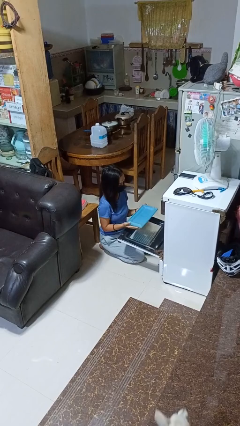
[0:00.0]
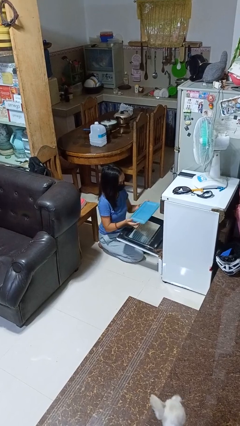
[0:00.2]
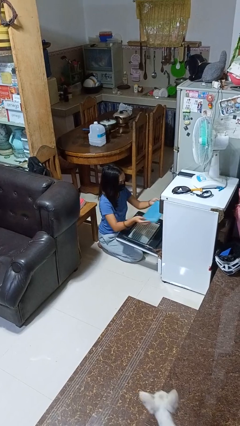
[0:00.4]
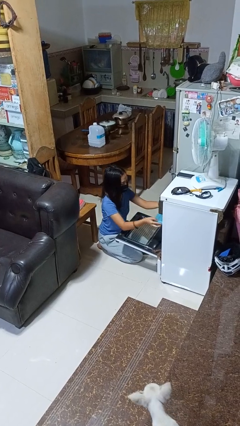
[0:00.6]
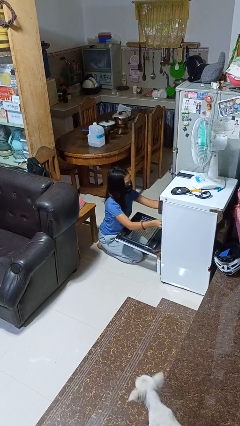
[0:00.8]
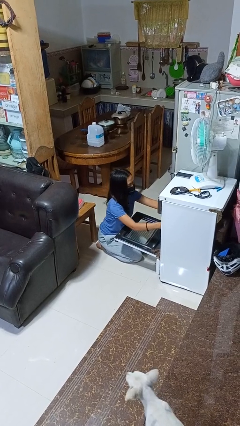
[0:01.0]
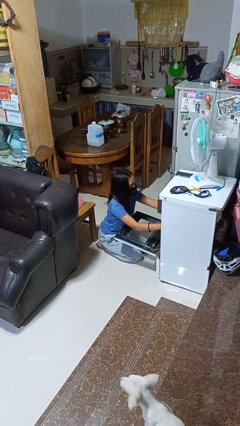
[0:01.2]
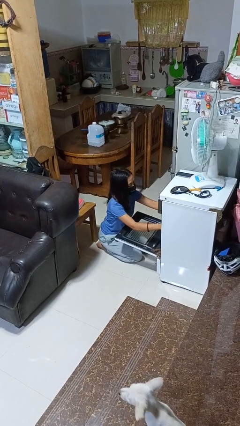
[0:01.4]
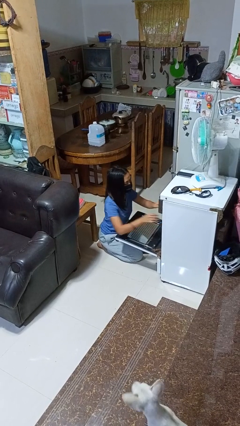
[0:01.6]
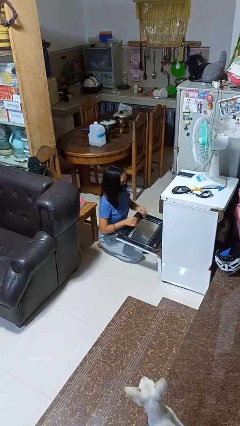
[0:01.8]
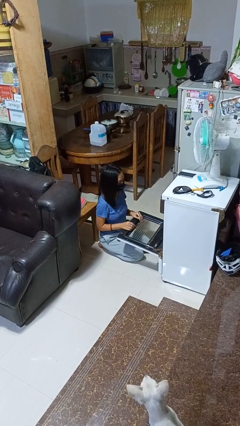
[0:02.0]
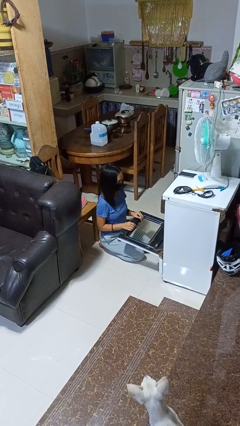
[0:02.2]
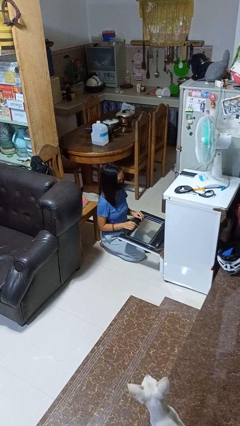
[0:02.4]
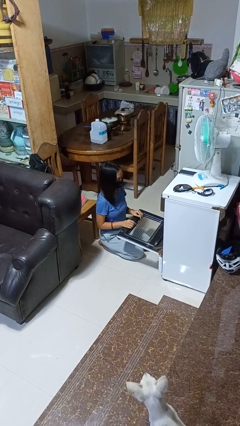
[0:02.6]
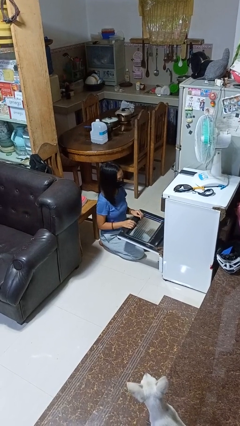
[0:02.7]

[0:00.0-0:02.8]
person puts object into oven

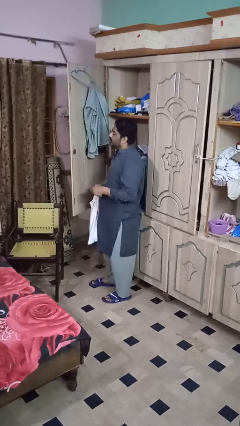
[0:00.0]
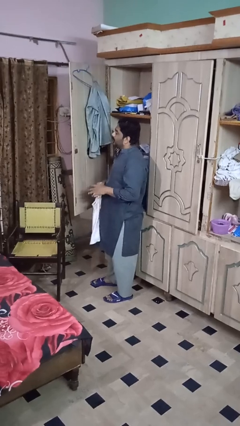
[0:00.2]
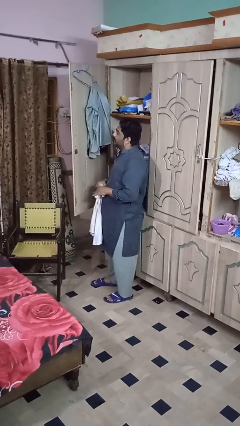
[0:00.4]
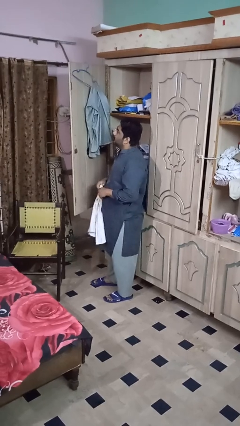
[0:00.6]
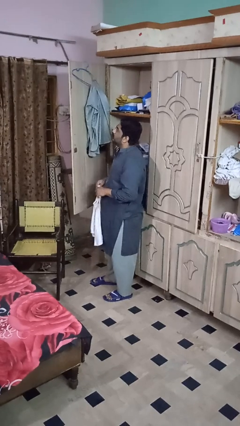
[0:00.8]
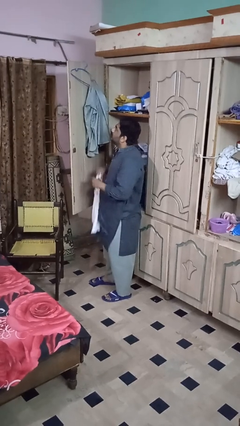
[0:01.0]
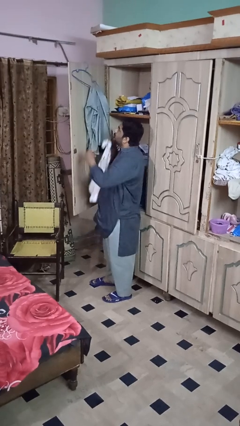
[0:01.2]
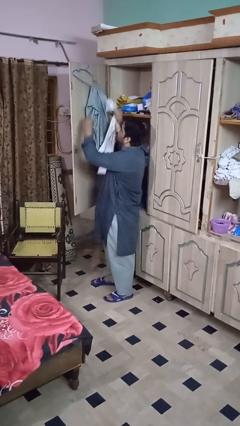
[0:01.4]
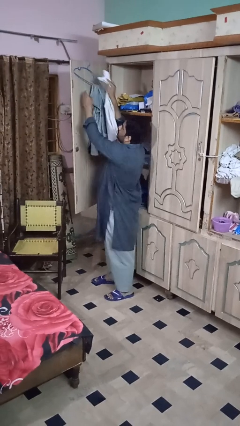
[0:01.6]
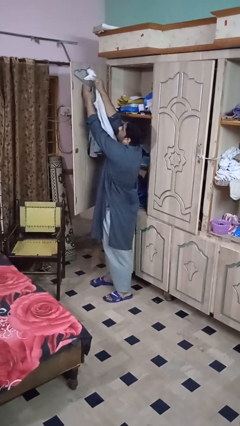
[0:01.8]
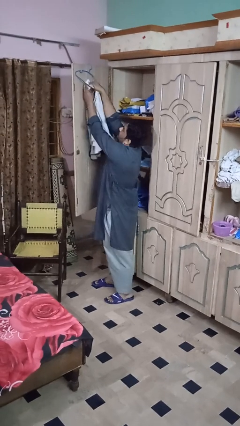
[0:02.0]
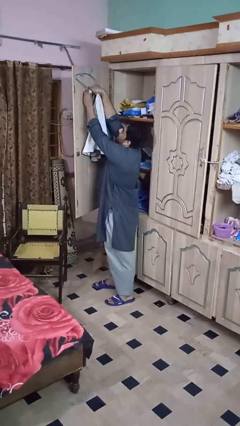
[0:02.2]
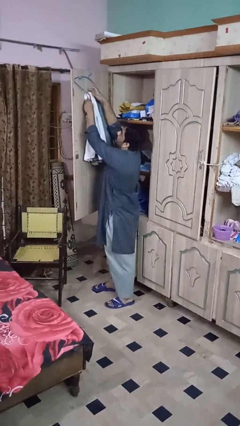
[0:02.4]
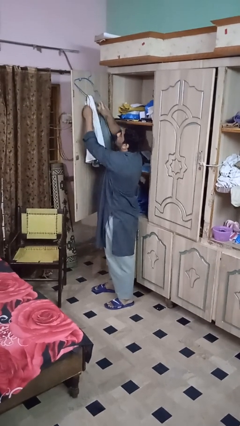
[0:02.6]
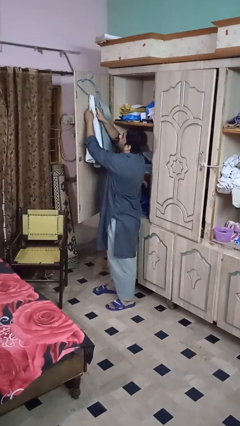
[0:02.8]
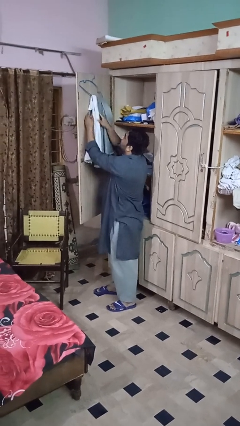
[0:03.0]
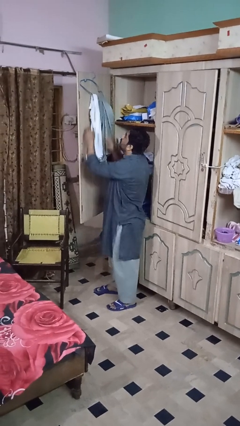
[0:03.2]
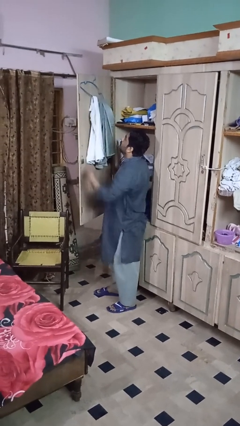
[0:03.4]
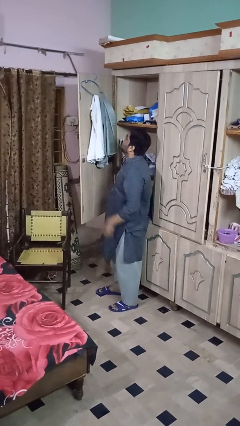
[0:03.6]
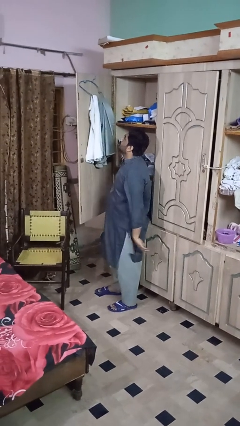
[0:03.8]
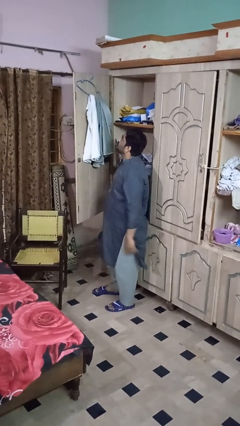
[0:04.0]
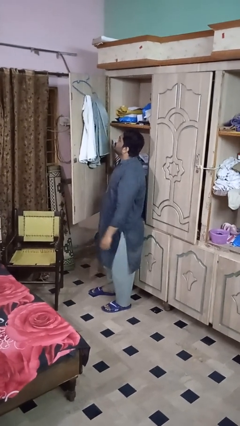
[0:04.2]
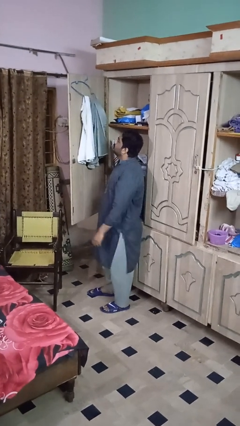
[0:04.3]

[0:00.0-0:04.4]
person puts clothes into closet

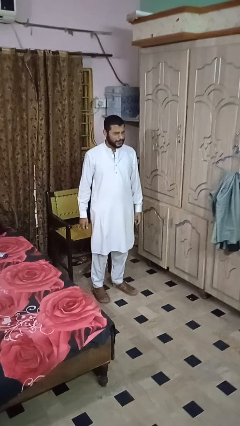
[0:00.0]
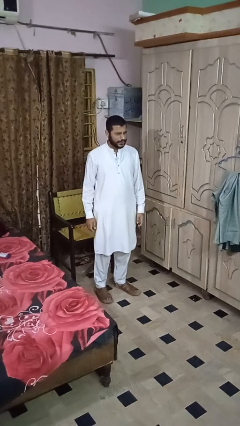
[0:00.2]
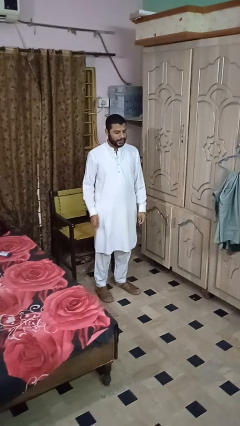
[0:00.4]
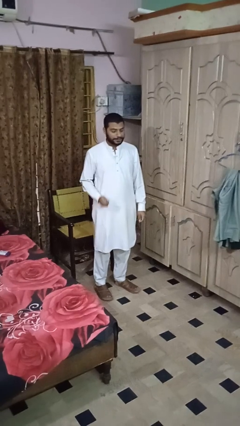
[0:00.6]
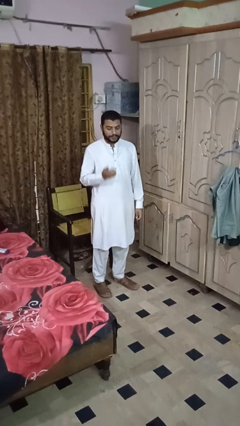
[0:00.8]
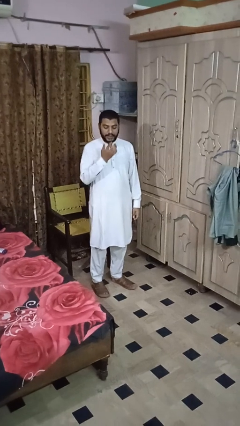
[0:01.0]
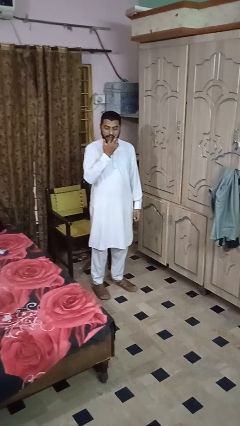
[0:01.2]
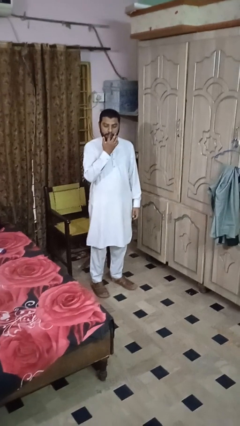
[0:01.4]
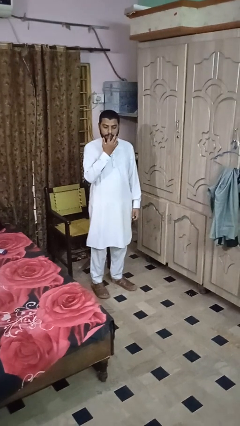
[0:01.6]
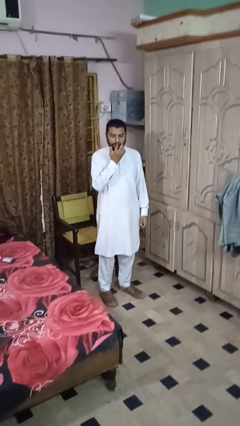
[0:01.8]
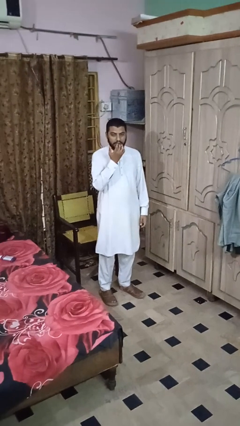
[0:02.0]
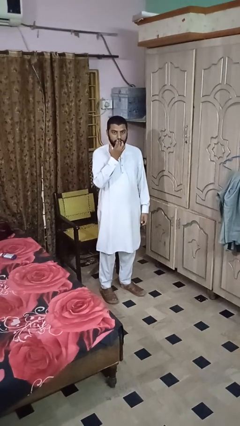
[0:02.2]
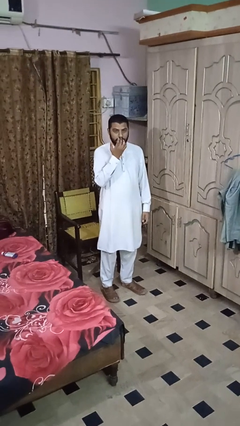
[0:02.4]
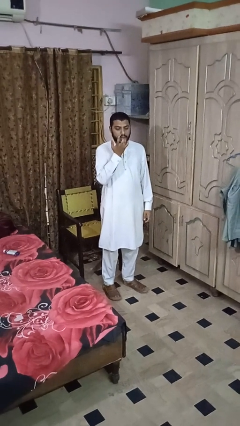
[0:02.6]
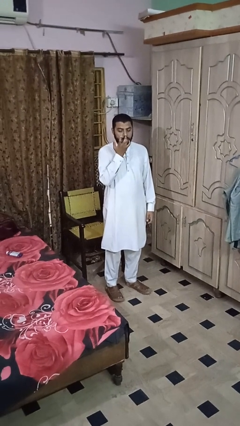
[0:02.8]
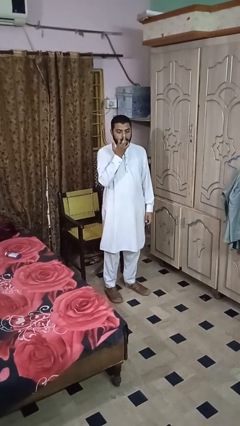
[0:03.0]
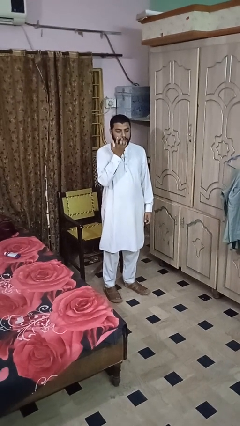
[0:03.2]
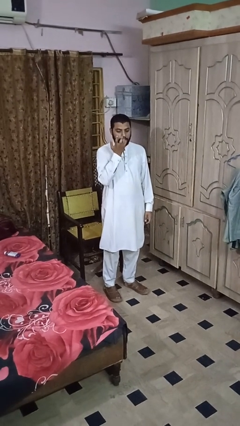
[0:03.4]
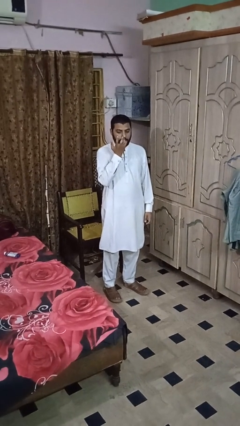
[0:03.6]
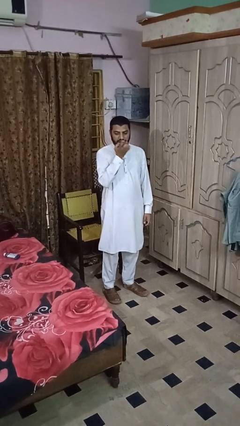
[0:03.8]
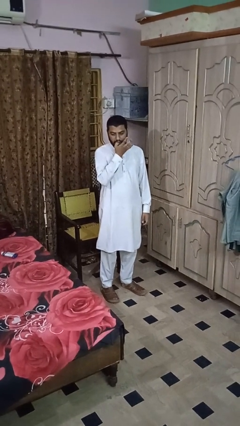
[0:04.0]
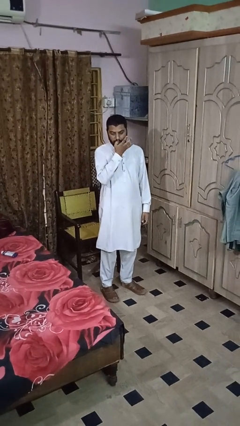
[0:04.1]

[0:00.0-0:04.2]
person licks fingers

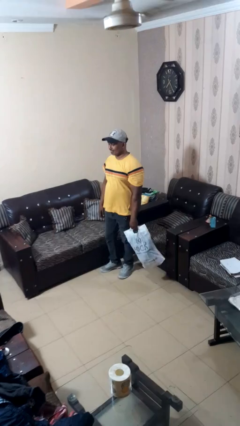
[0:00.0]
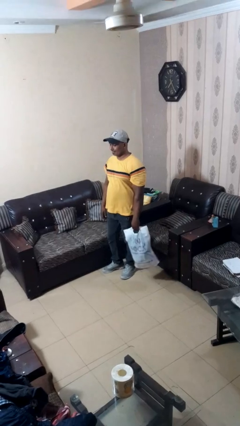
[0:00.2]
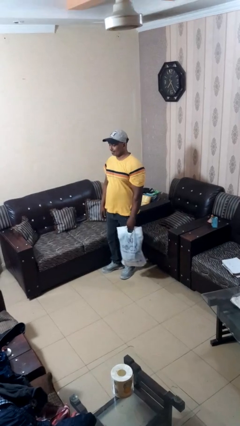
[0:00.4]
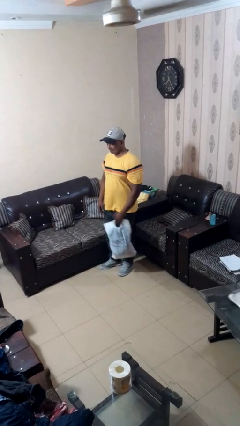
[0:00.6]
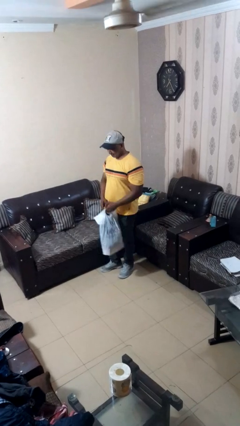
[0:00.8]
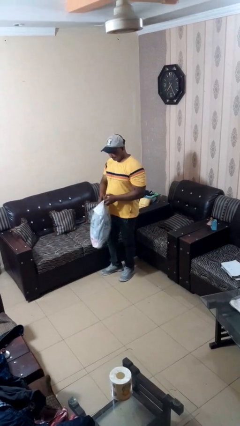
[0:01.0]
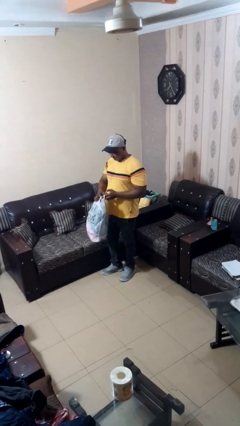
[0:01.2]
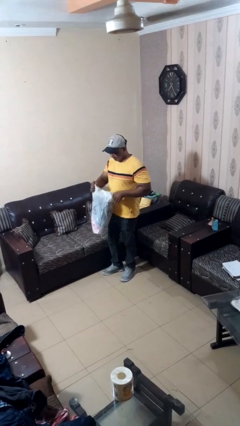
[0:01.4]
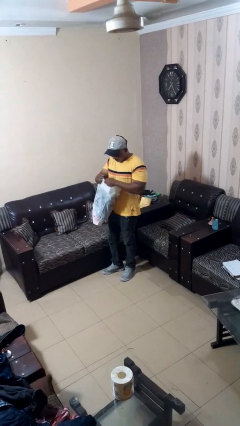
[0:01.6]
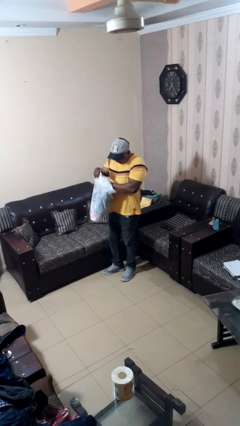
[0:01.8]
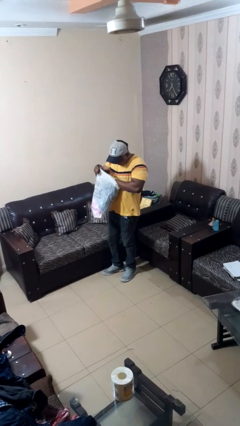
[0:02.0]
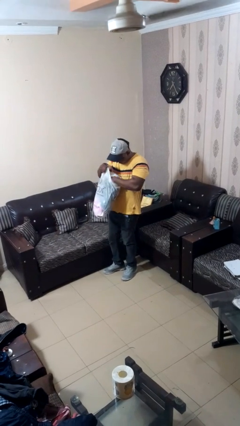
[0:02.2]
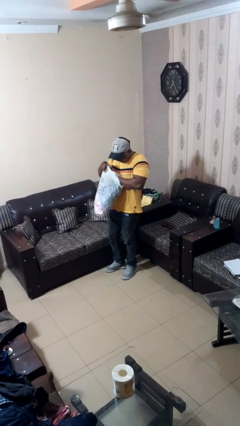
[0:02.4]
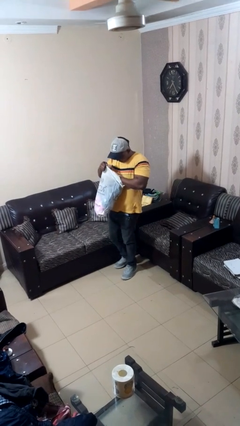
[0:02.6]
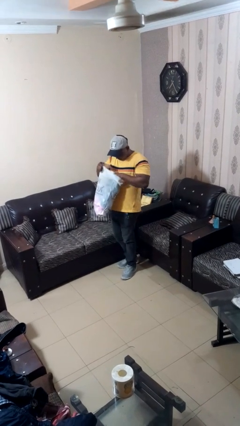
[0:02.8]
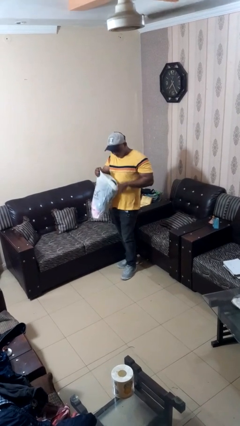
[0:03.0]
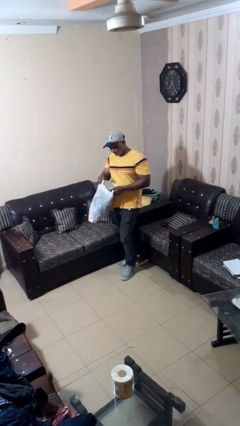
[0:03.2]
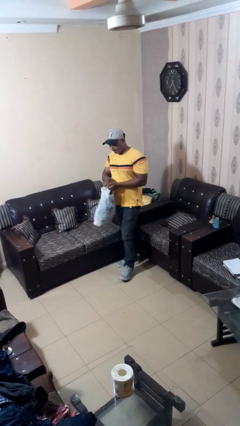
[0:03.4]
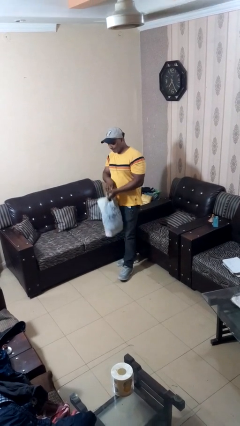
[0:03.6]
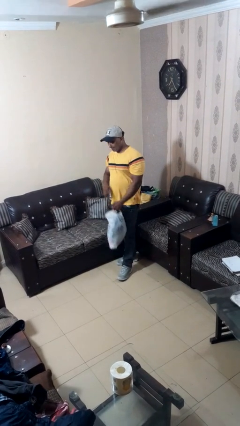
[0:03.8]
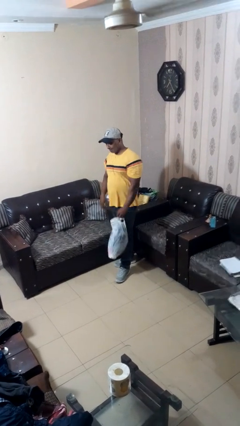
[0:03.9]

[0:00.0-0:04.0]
person searches in bag

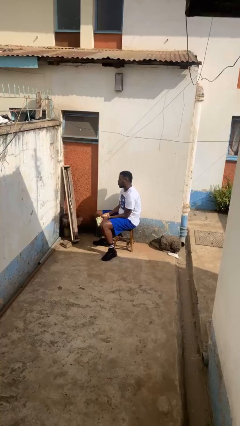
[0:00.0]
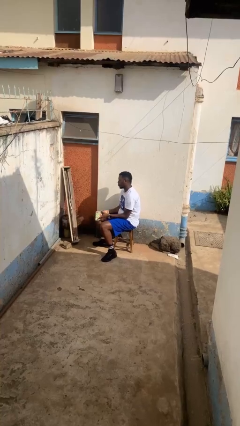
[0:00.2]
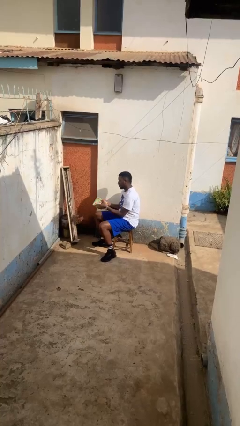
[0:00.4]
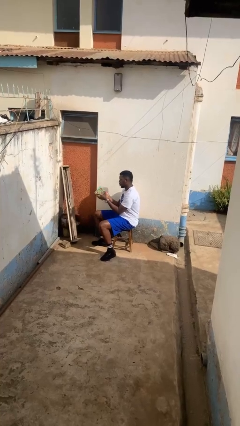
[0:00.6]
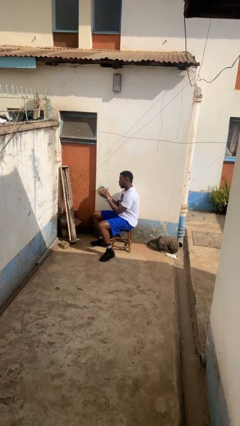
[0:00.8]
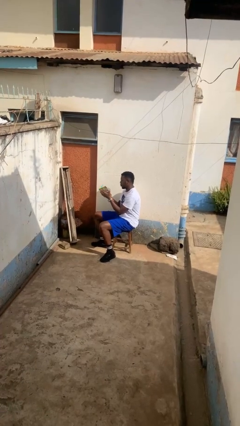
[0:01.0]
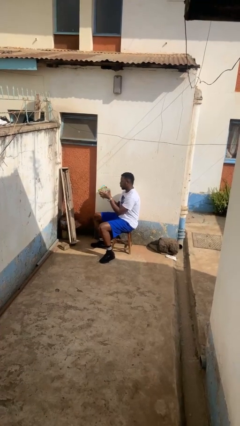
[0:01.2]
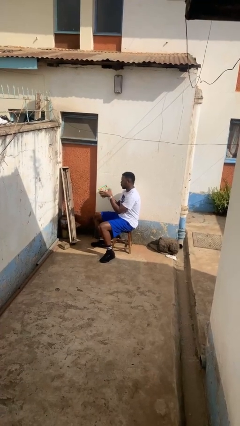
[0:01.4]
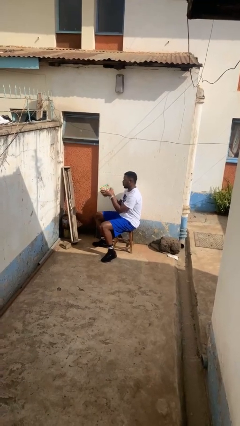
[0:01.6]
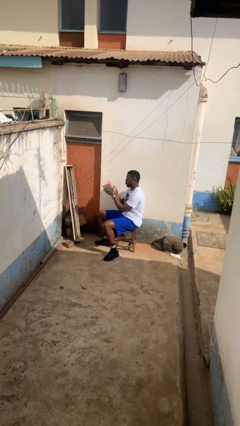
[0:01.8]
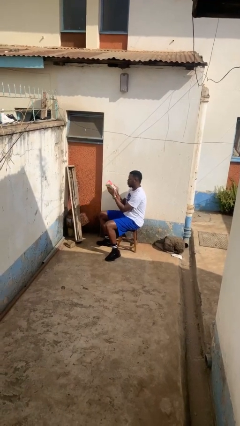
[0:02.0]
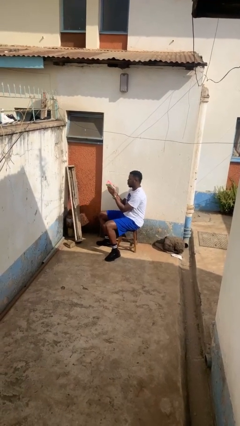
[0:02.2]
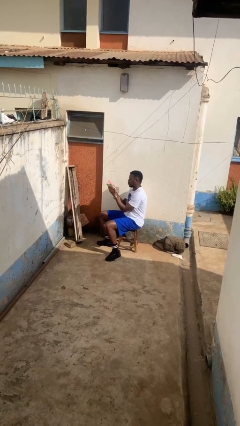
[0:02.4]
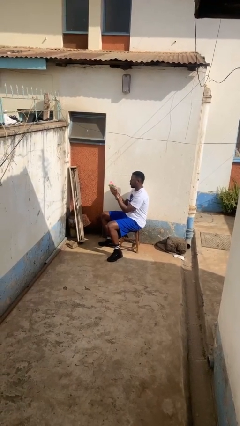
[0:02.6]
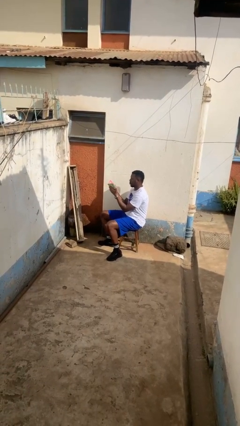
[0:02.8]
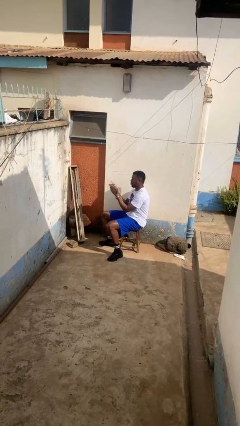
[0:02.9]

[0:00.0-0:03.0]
person reads book
